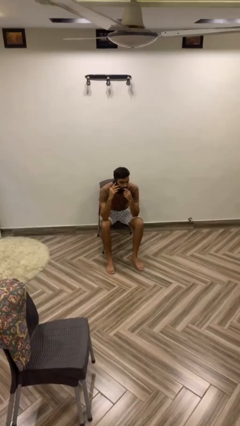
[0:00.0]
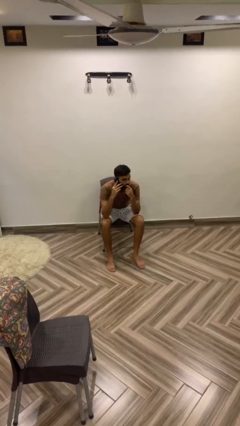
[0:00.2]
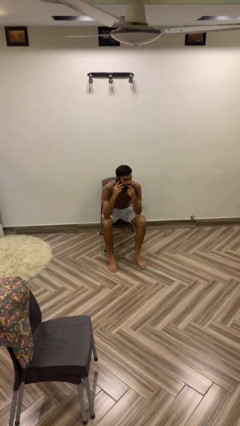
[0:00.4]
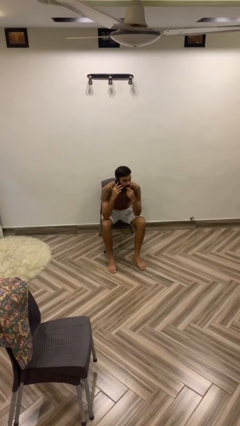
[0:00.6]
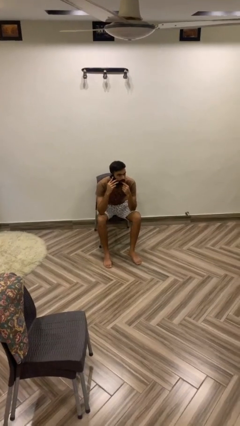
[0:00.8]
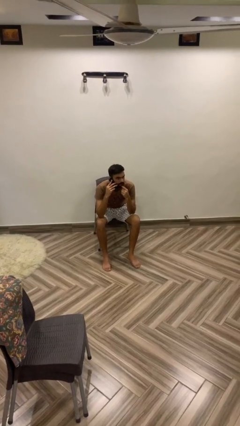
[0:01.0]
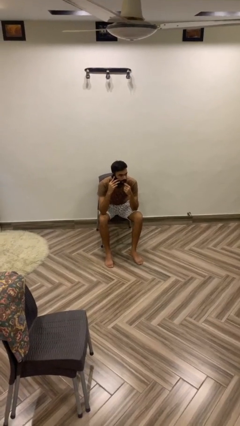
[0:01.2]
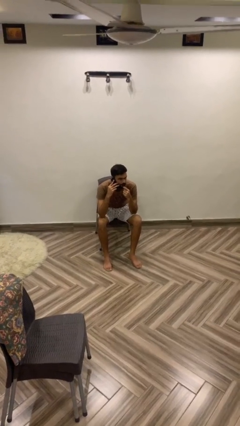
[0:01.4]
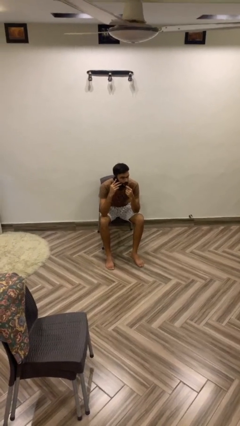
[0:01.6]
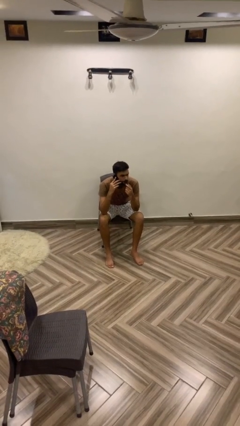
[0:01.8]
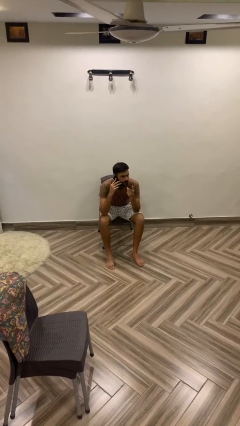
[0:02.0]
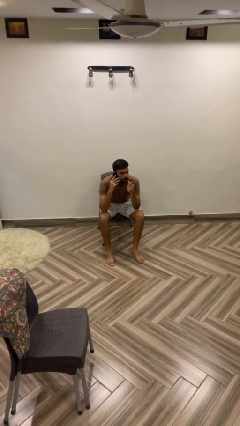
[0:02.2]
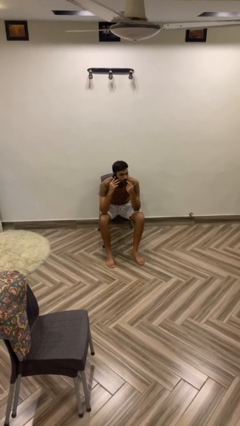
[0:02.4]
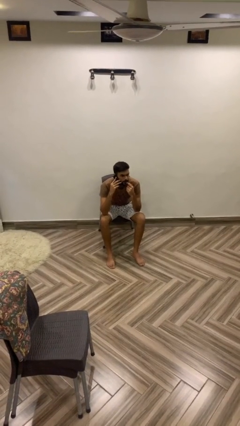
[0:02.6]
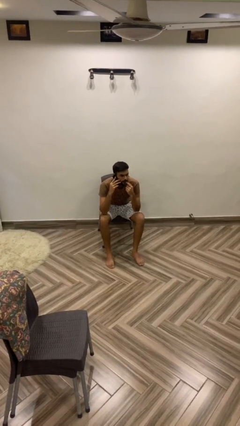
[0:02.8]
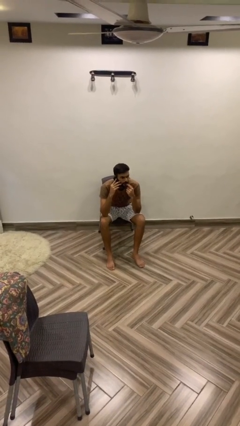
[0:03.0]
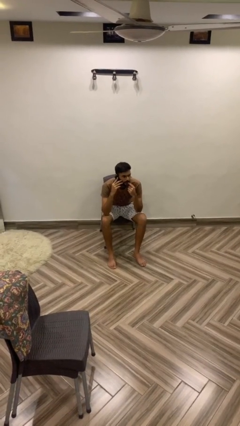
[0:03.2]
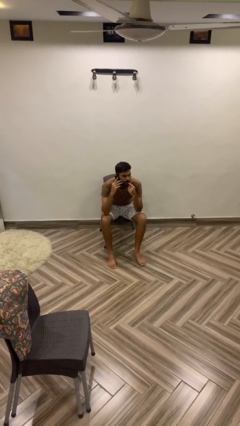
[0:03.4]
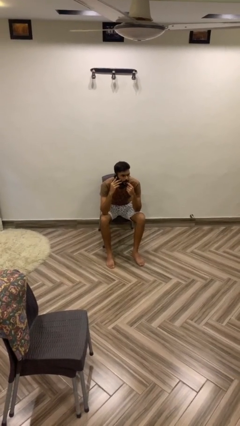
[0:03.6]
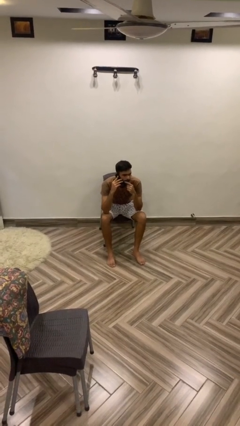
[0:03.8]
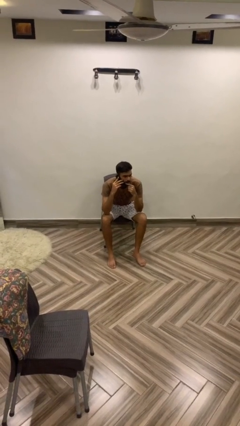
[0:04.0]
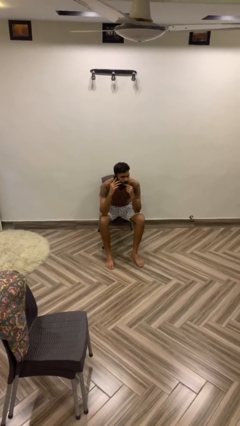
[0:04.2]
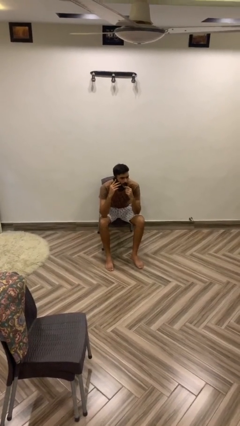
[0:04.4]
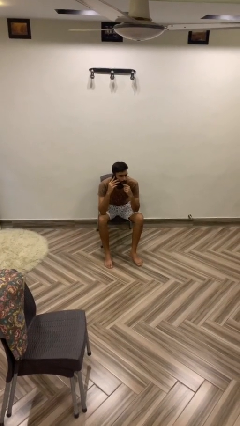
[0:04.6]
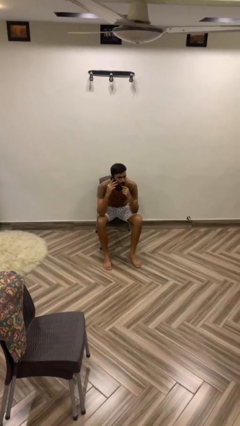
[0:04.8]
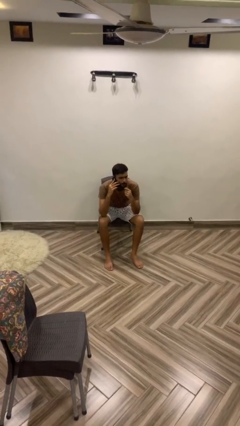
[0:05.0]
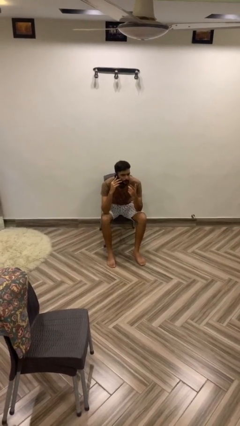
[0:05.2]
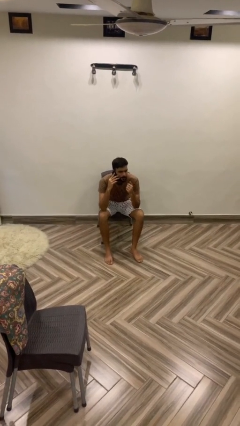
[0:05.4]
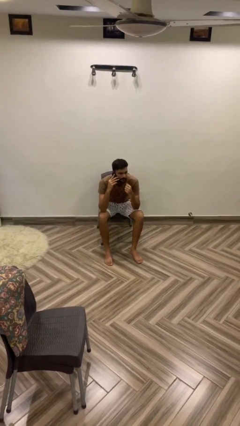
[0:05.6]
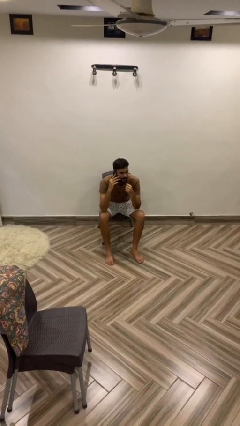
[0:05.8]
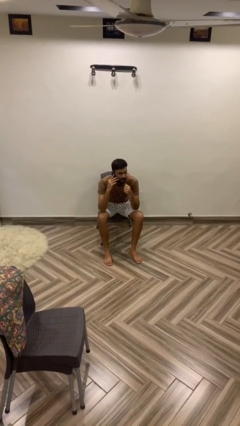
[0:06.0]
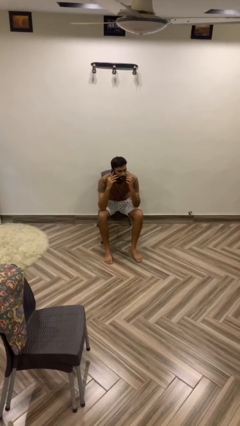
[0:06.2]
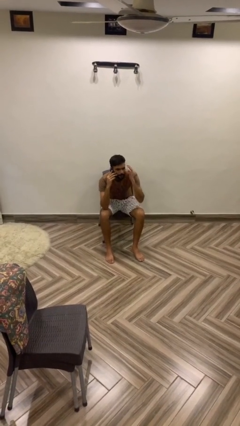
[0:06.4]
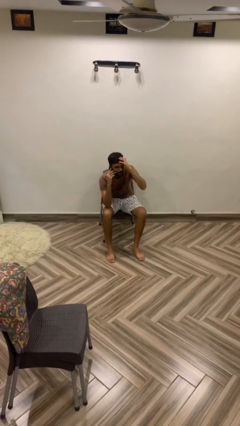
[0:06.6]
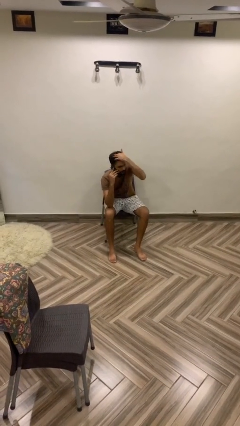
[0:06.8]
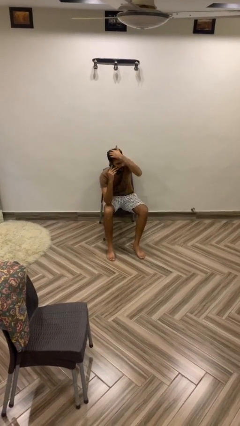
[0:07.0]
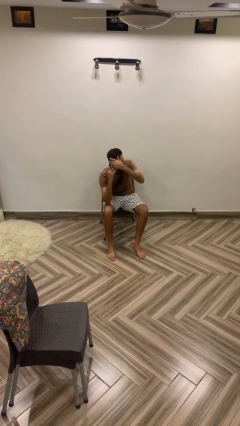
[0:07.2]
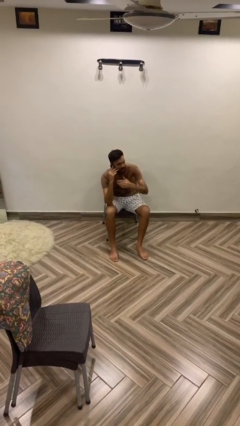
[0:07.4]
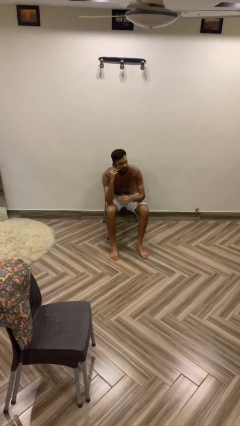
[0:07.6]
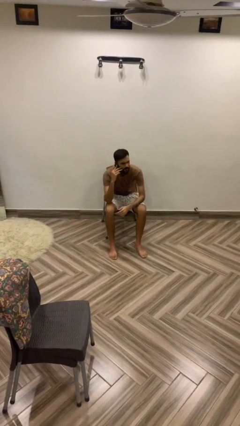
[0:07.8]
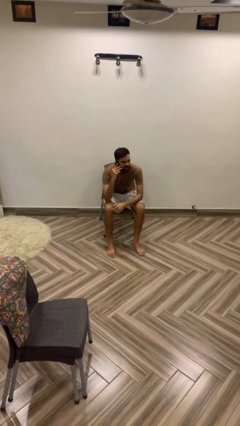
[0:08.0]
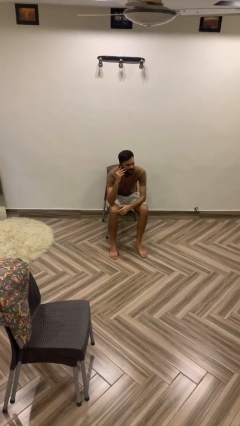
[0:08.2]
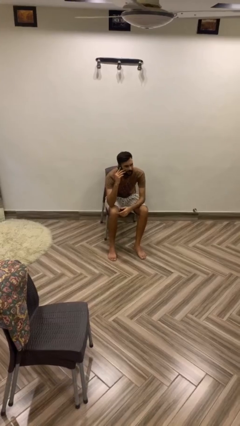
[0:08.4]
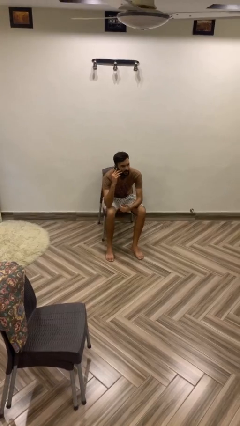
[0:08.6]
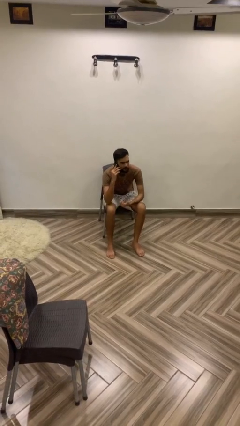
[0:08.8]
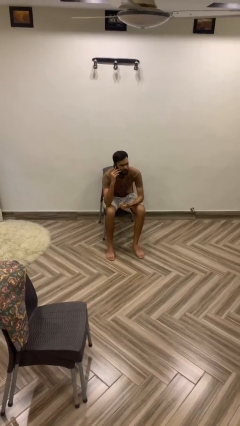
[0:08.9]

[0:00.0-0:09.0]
person talks on phone

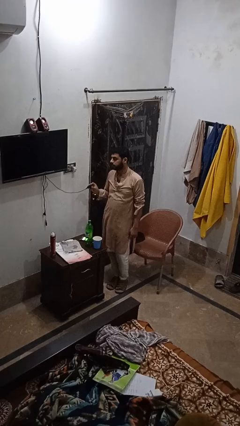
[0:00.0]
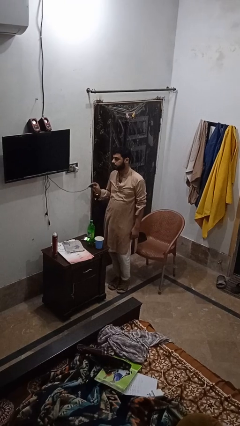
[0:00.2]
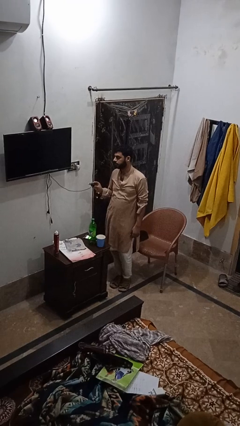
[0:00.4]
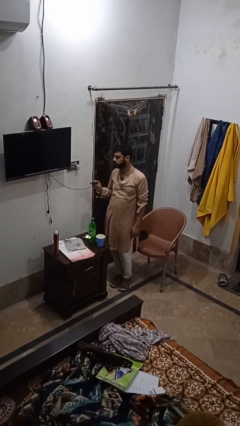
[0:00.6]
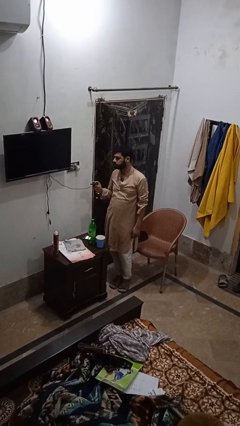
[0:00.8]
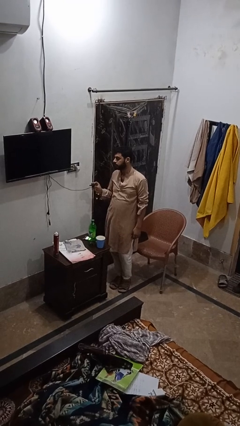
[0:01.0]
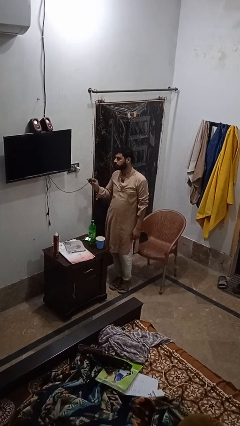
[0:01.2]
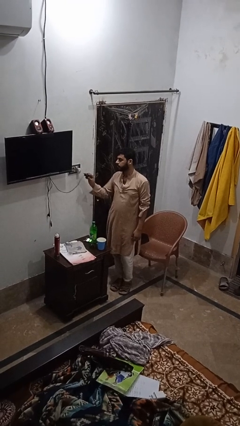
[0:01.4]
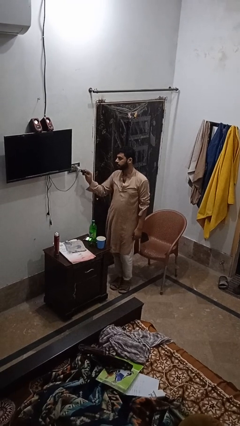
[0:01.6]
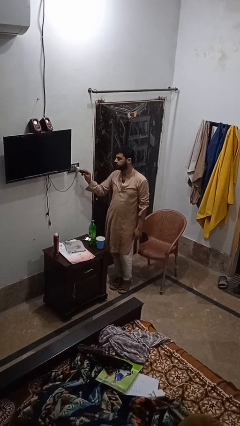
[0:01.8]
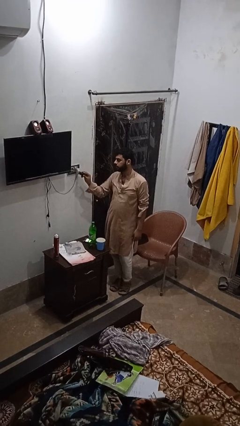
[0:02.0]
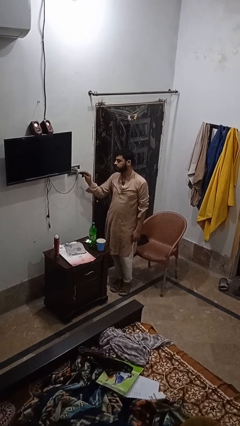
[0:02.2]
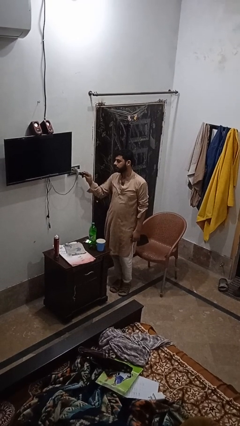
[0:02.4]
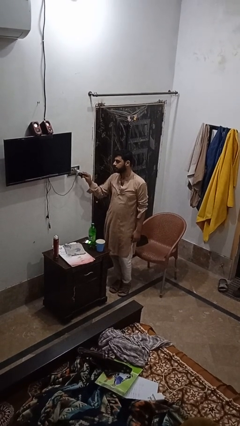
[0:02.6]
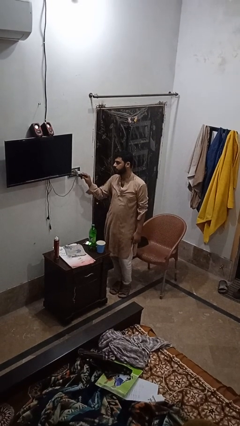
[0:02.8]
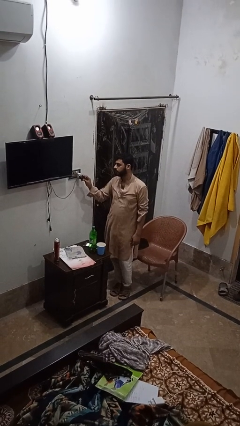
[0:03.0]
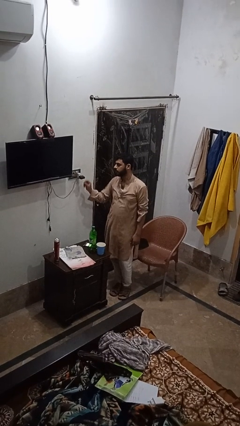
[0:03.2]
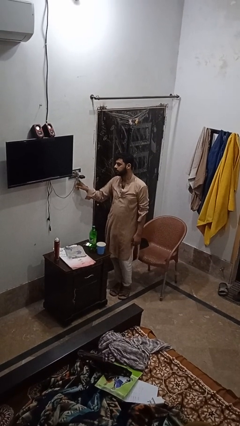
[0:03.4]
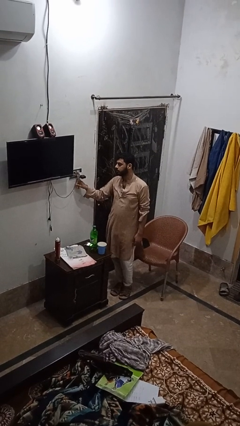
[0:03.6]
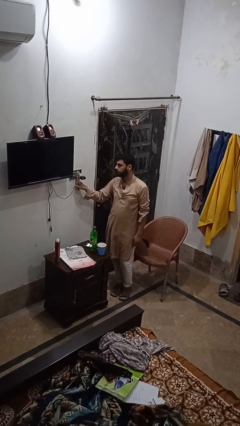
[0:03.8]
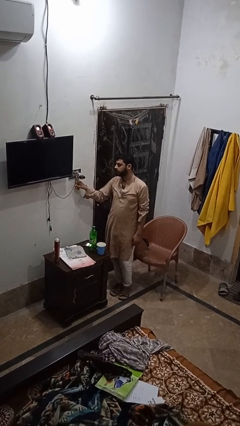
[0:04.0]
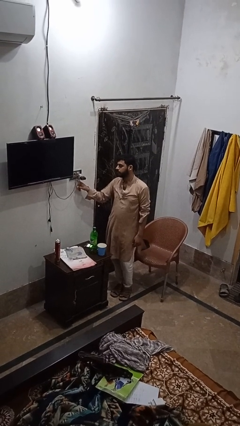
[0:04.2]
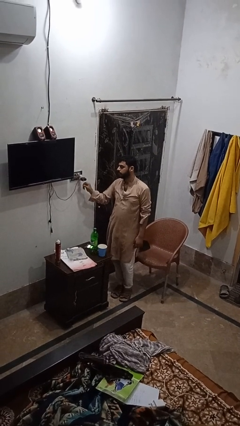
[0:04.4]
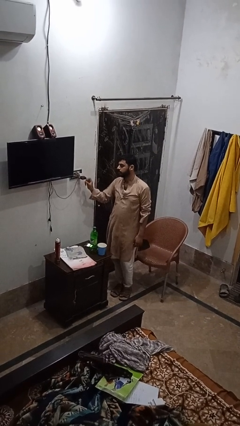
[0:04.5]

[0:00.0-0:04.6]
person plugs into electrical socket

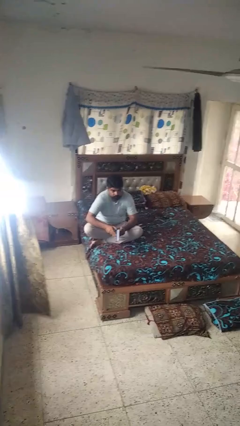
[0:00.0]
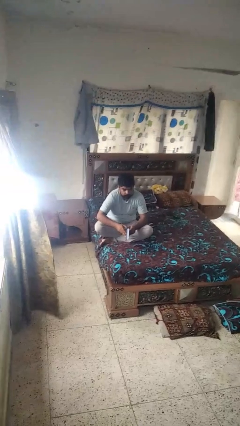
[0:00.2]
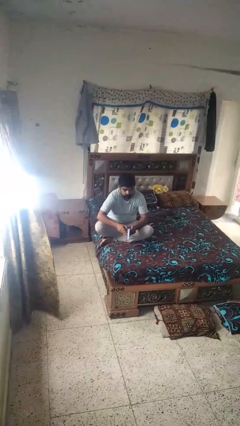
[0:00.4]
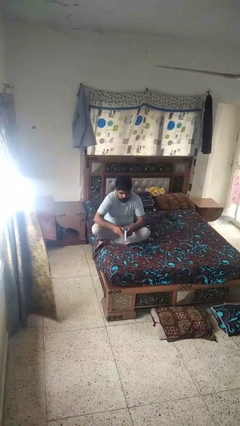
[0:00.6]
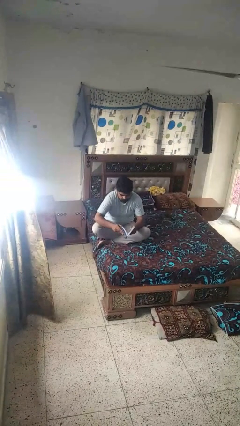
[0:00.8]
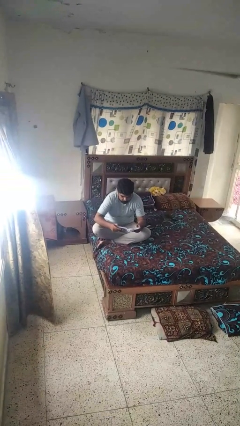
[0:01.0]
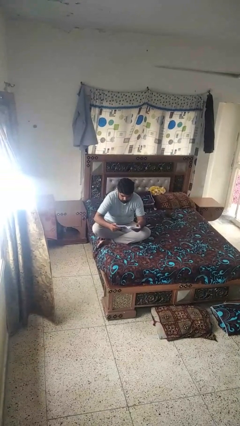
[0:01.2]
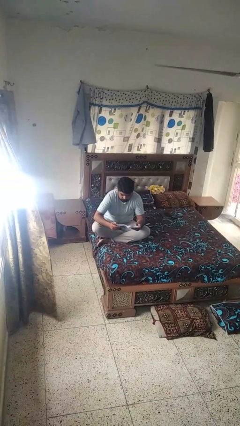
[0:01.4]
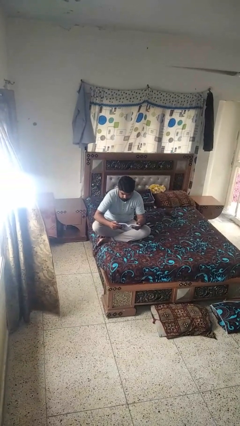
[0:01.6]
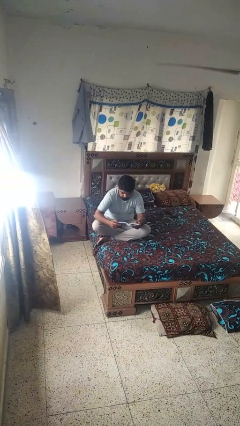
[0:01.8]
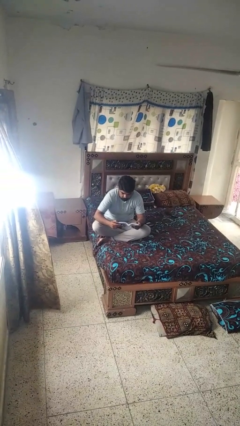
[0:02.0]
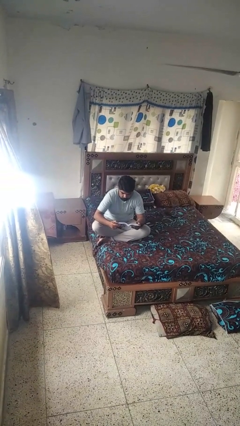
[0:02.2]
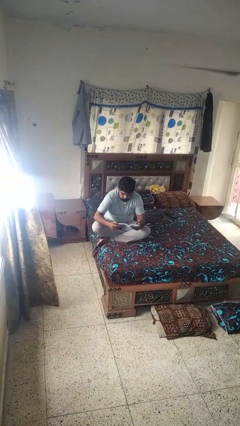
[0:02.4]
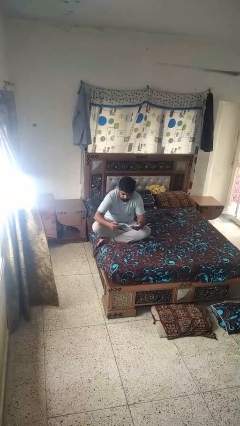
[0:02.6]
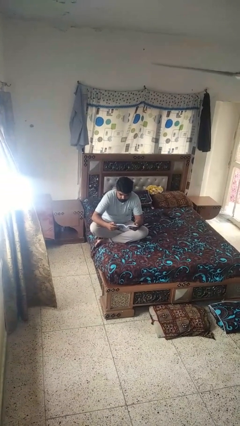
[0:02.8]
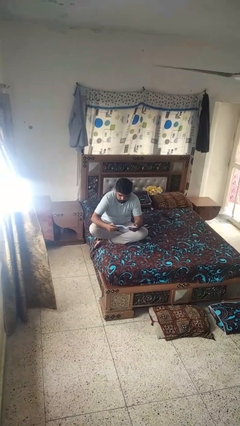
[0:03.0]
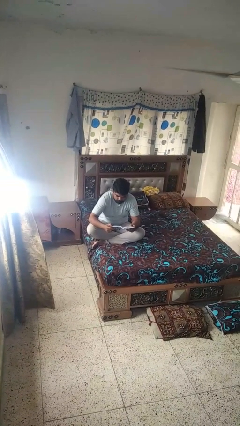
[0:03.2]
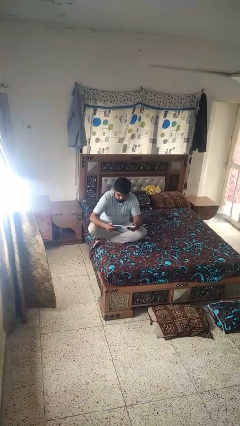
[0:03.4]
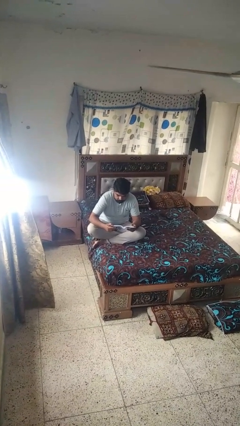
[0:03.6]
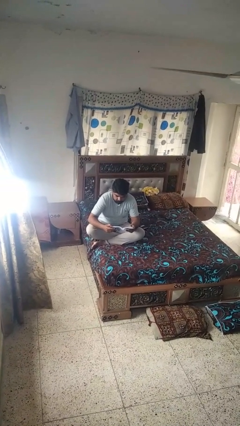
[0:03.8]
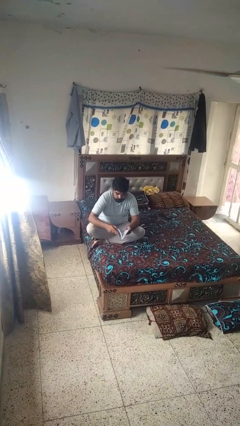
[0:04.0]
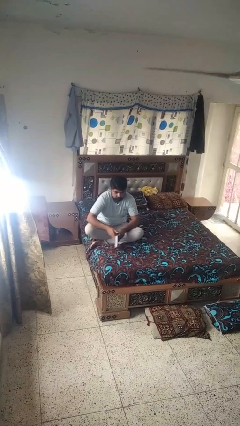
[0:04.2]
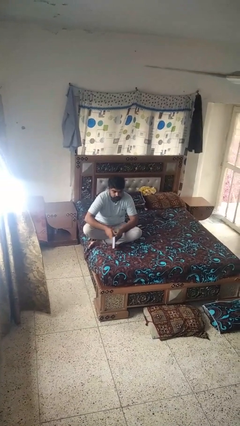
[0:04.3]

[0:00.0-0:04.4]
person reads book

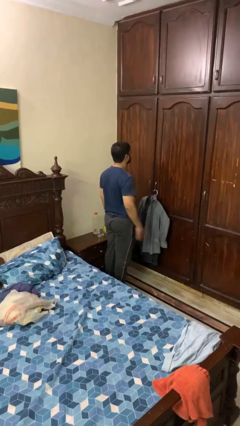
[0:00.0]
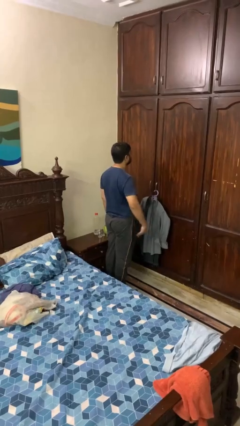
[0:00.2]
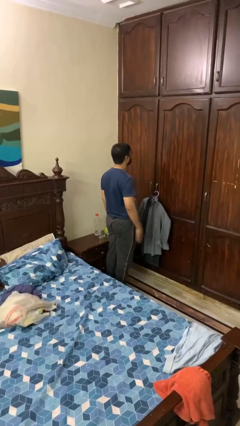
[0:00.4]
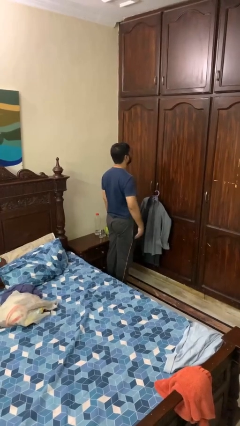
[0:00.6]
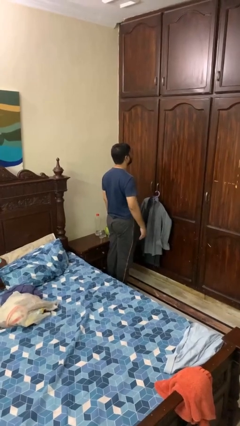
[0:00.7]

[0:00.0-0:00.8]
person slaps hands on thighs
